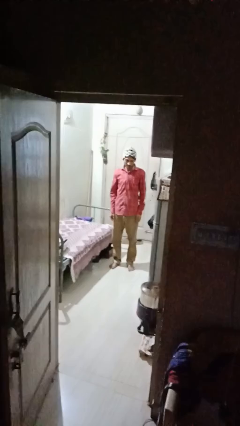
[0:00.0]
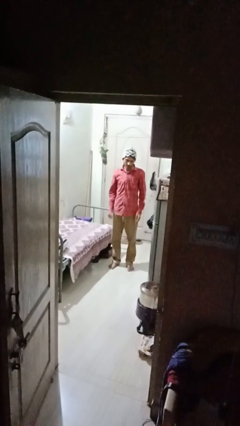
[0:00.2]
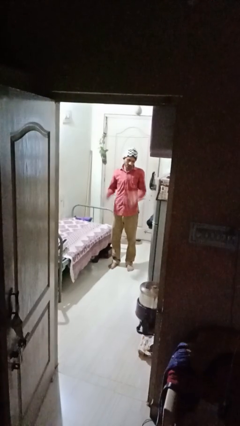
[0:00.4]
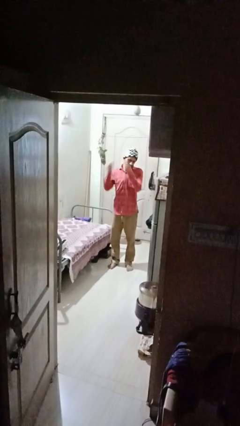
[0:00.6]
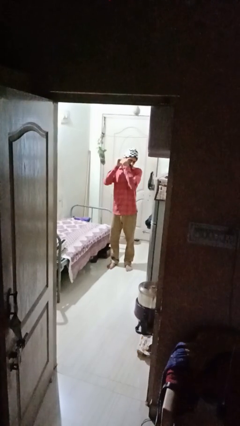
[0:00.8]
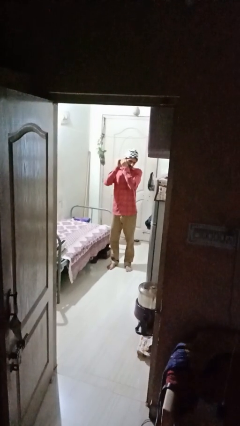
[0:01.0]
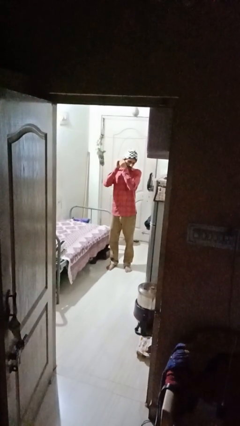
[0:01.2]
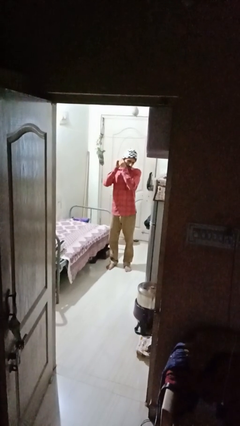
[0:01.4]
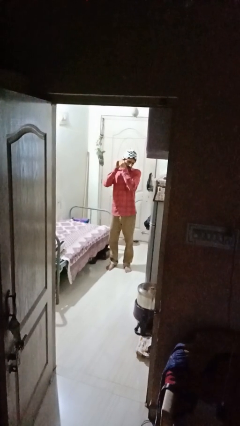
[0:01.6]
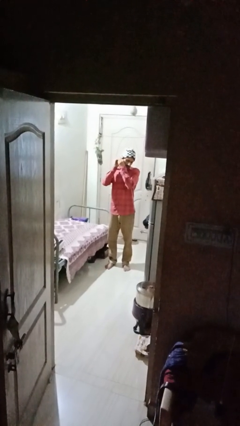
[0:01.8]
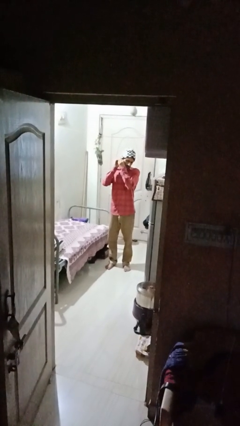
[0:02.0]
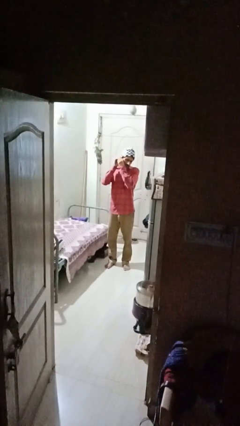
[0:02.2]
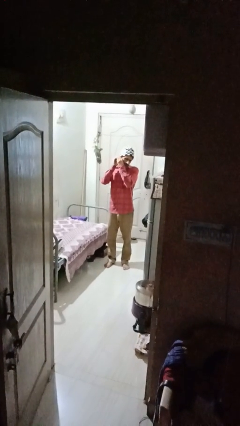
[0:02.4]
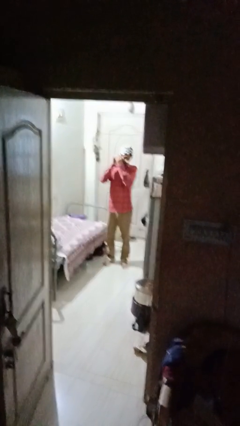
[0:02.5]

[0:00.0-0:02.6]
person takes off earrings

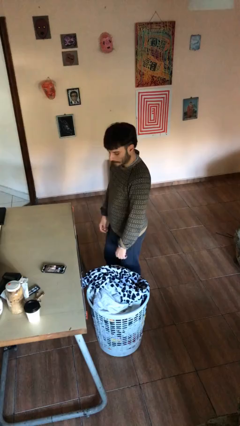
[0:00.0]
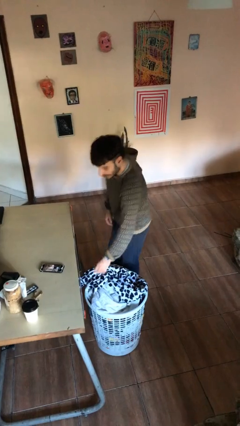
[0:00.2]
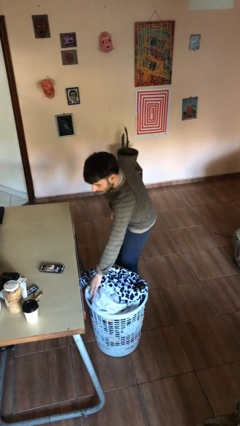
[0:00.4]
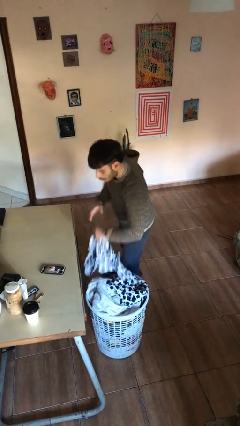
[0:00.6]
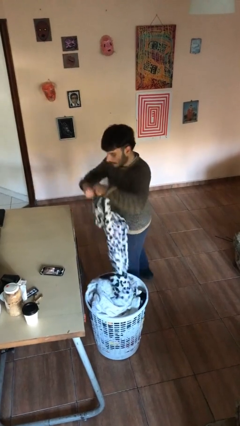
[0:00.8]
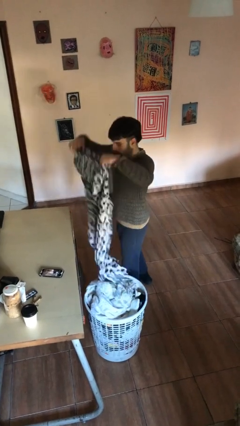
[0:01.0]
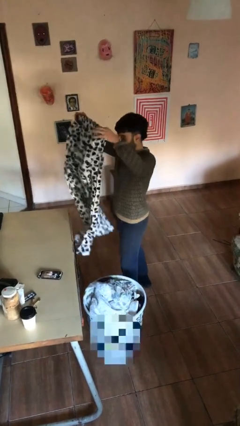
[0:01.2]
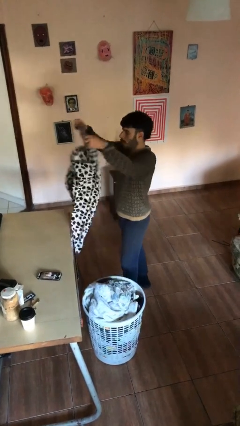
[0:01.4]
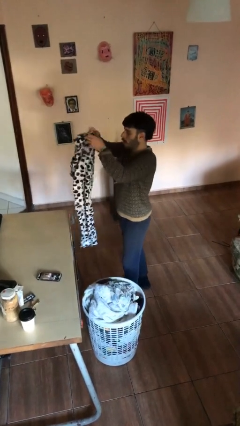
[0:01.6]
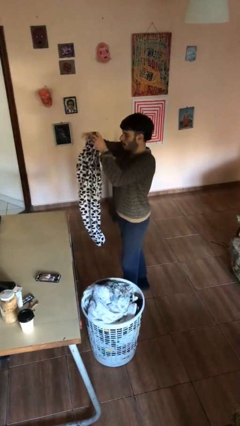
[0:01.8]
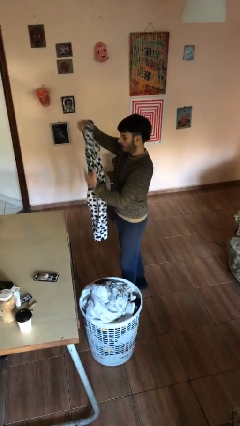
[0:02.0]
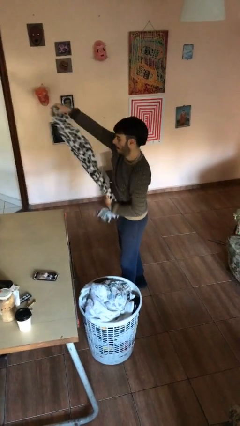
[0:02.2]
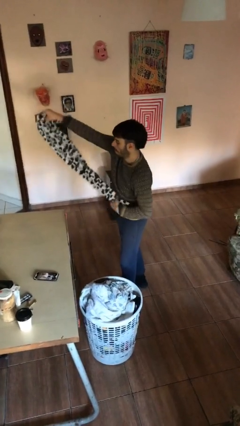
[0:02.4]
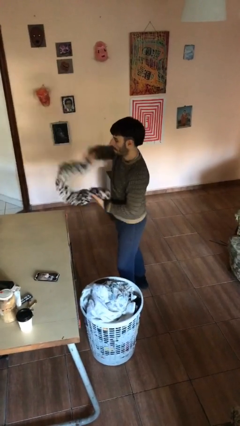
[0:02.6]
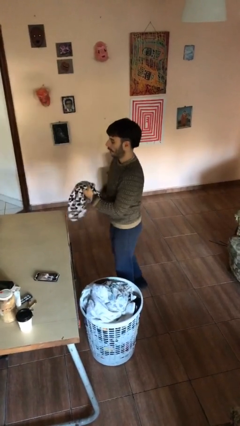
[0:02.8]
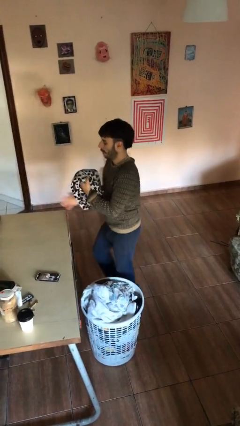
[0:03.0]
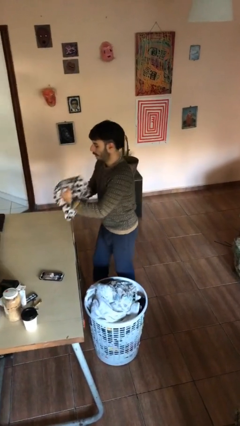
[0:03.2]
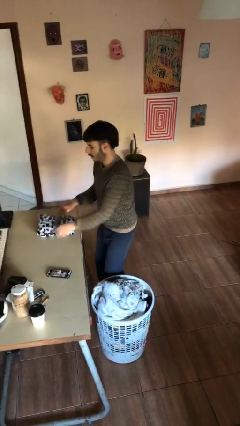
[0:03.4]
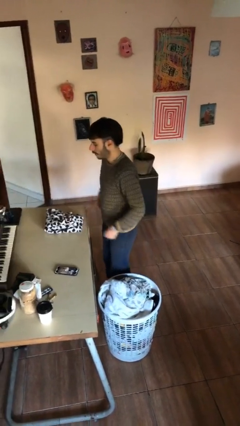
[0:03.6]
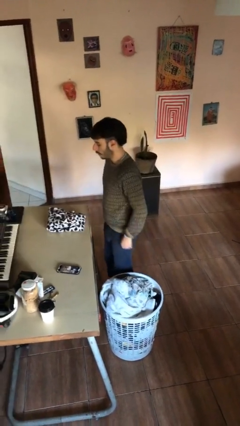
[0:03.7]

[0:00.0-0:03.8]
person folds pants

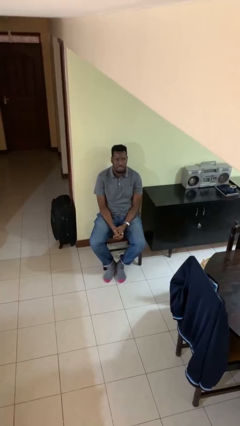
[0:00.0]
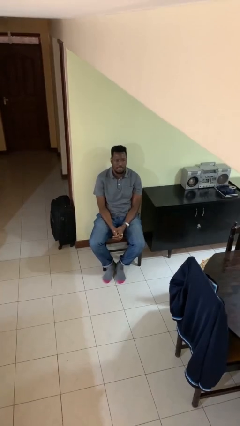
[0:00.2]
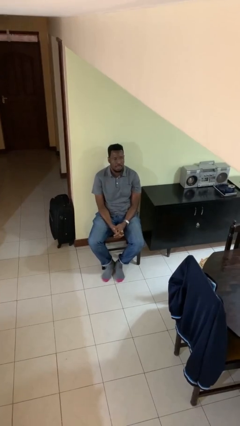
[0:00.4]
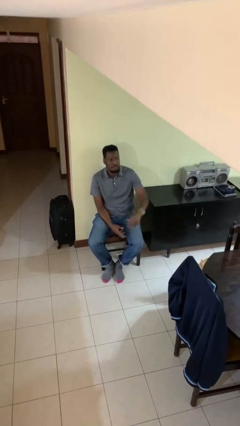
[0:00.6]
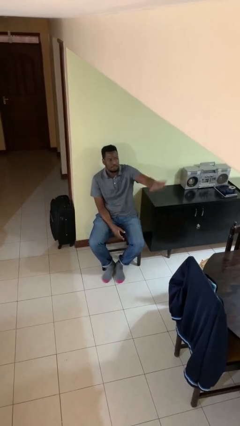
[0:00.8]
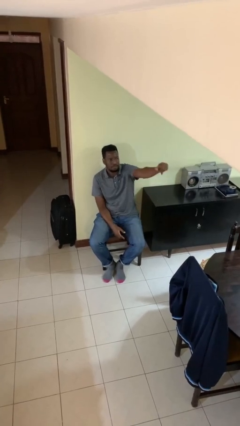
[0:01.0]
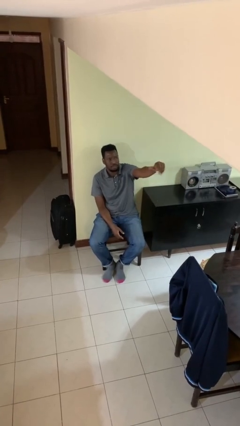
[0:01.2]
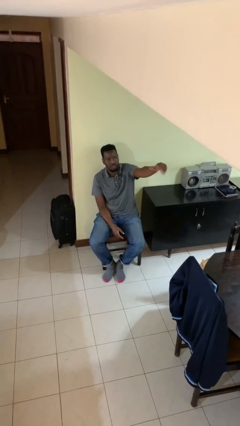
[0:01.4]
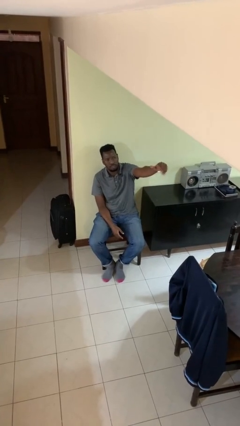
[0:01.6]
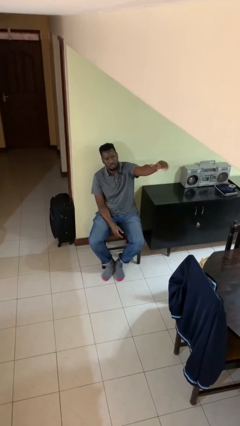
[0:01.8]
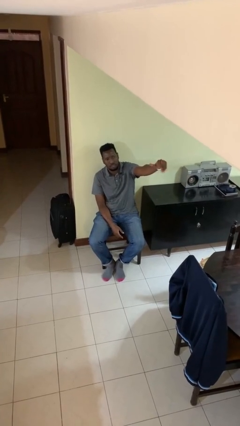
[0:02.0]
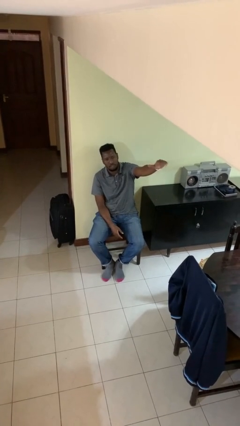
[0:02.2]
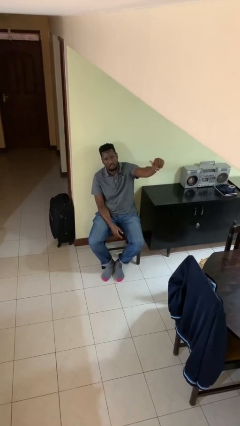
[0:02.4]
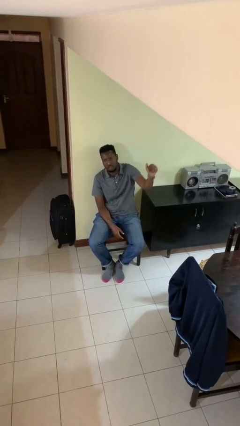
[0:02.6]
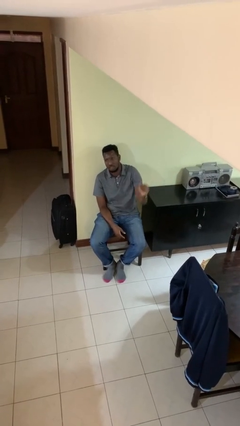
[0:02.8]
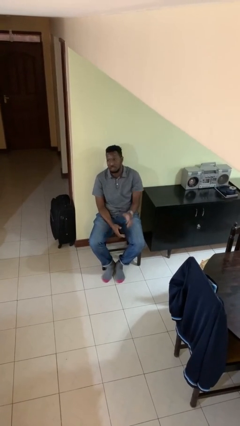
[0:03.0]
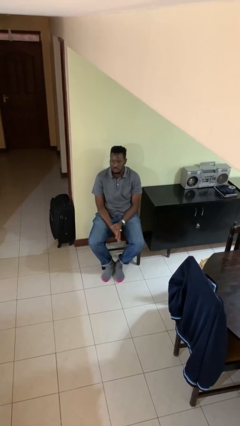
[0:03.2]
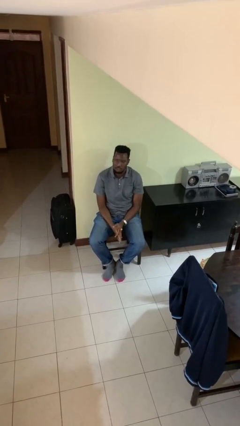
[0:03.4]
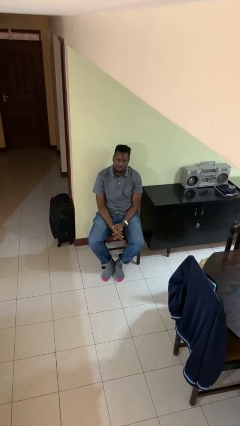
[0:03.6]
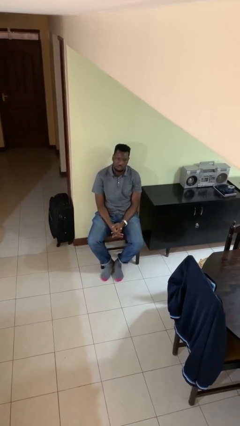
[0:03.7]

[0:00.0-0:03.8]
person gestures come here

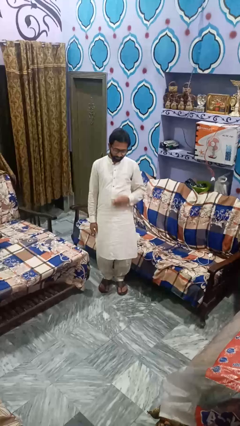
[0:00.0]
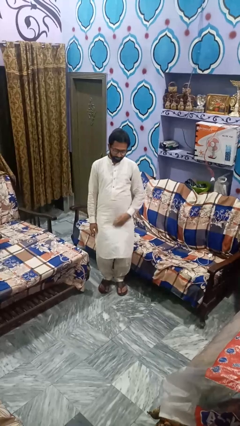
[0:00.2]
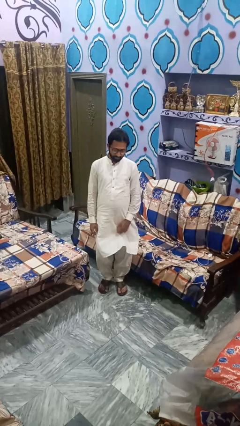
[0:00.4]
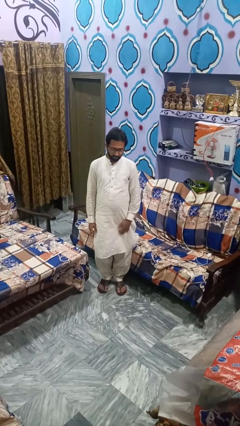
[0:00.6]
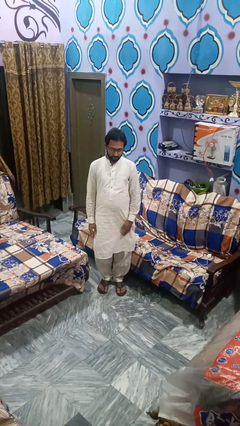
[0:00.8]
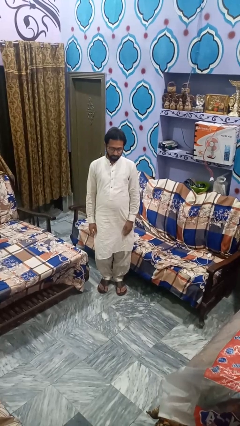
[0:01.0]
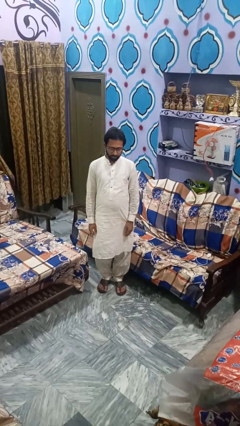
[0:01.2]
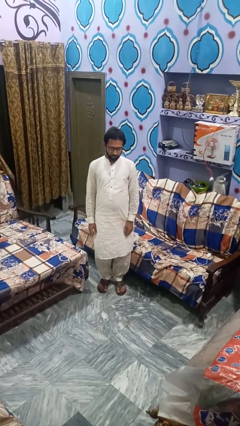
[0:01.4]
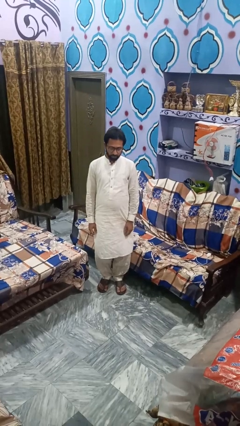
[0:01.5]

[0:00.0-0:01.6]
person lies down on couch

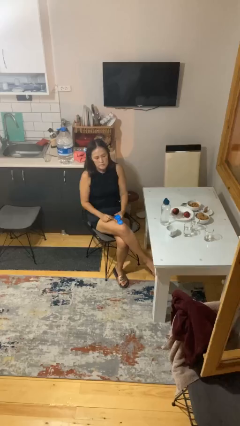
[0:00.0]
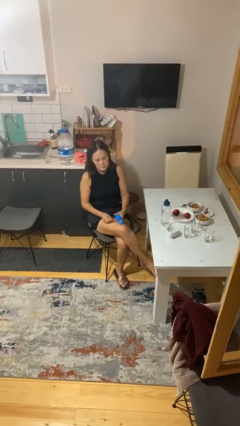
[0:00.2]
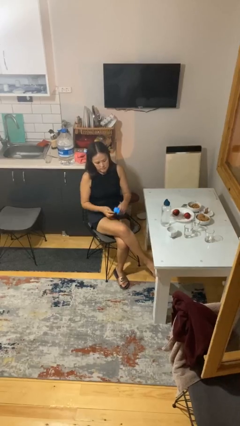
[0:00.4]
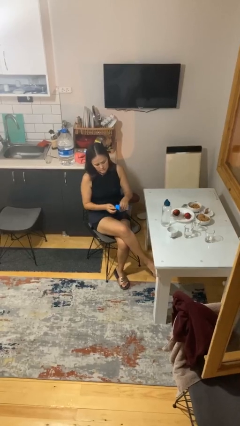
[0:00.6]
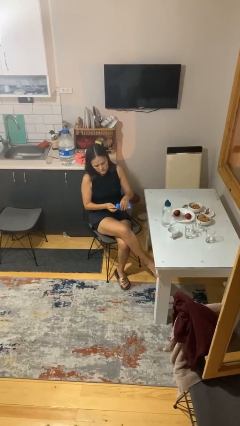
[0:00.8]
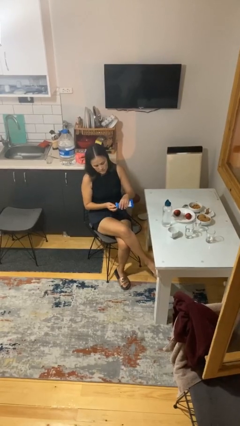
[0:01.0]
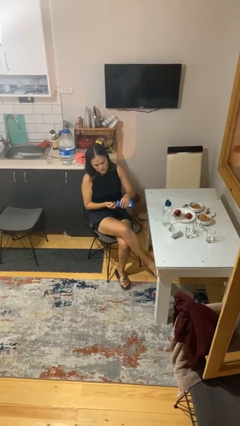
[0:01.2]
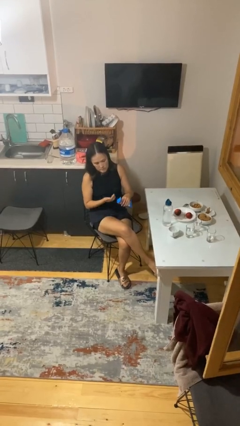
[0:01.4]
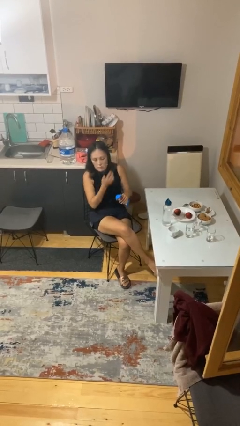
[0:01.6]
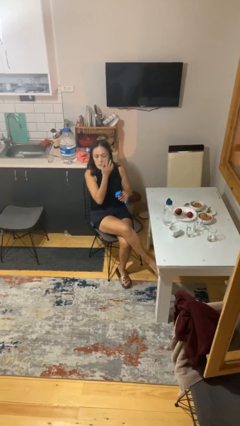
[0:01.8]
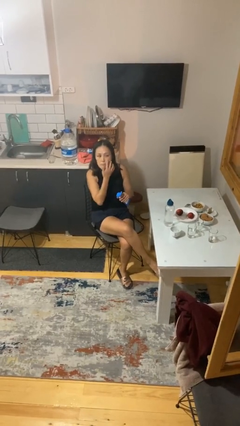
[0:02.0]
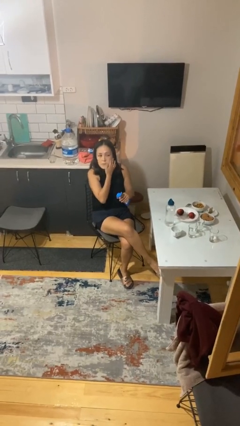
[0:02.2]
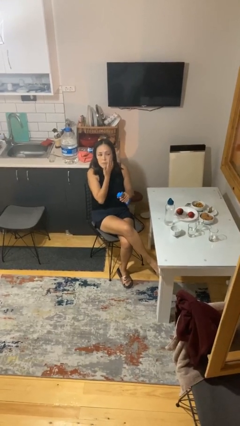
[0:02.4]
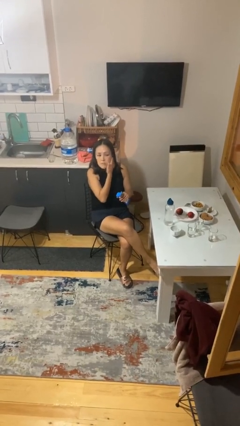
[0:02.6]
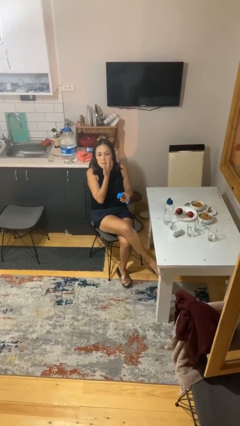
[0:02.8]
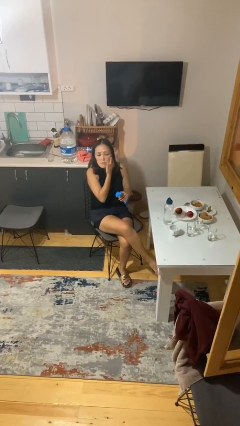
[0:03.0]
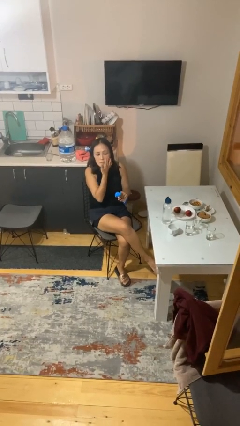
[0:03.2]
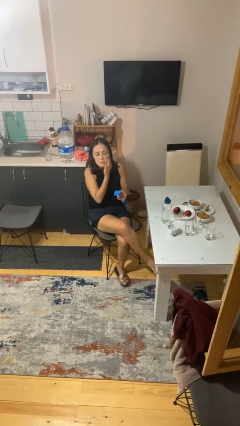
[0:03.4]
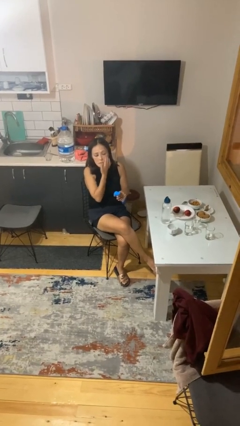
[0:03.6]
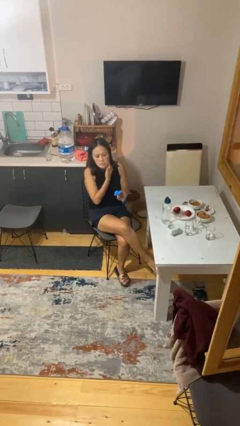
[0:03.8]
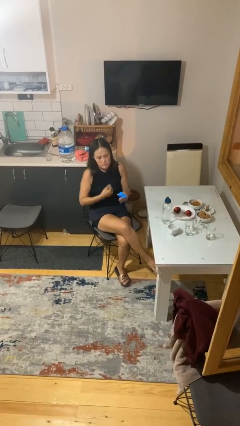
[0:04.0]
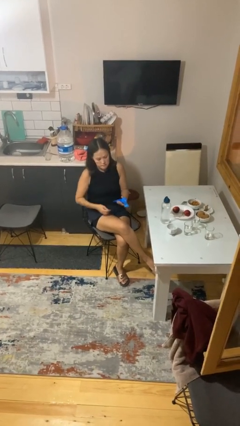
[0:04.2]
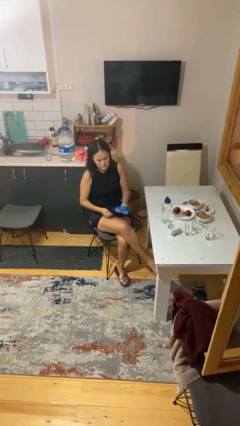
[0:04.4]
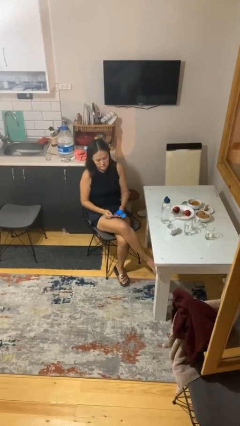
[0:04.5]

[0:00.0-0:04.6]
person applies facial moisturizer

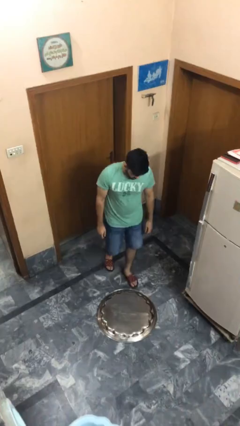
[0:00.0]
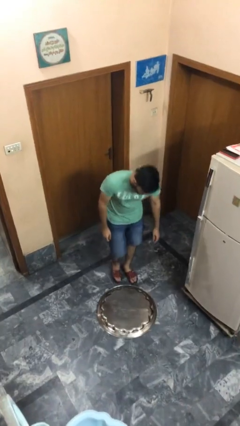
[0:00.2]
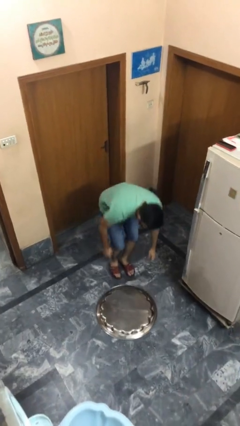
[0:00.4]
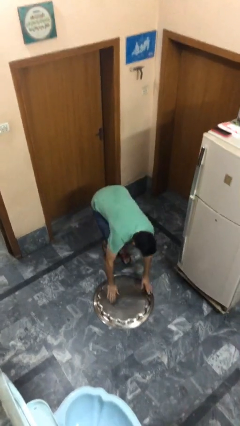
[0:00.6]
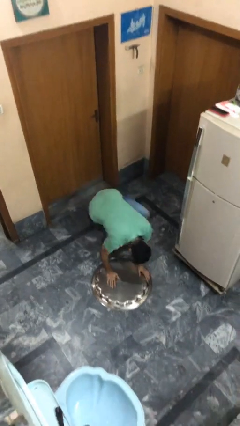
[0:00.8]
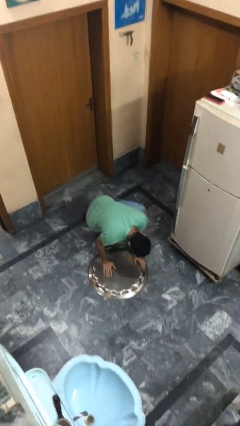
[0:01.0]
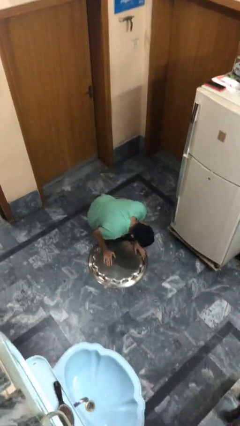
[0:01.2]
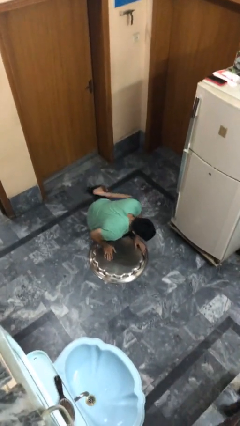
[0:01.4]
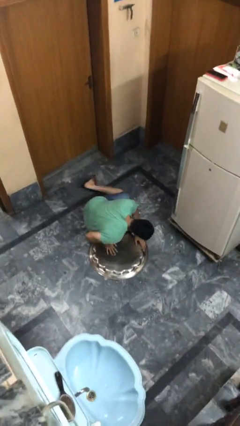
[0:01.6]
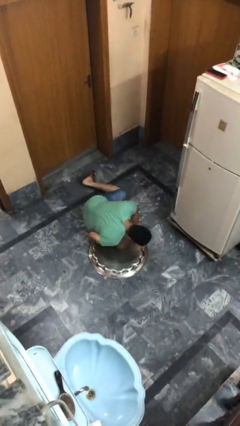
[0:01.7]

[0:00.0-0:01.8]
person trips on object on floor
